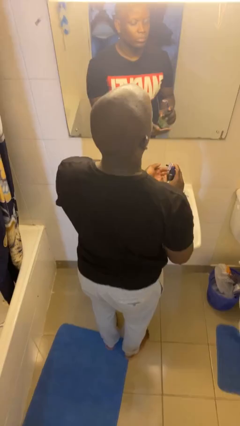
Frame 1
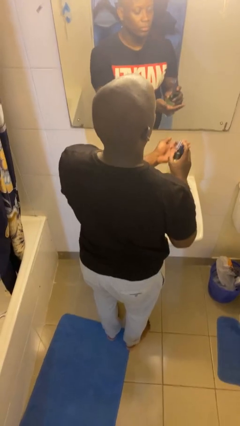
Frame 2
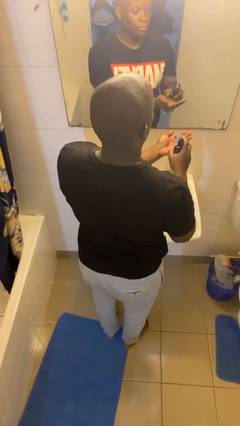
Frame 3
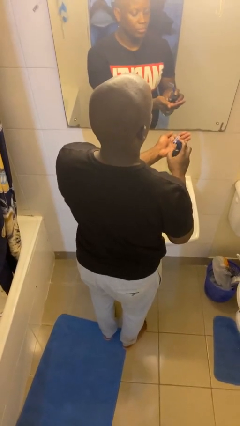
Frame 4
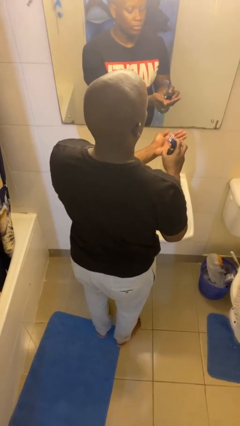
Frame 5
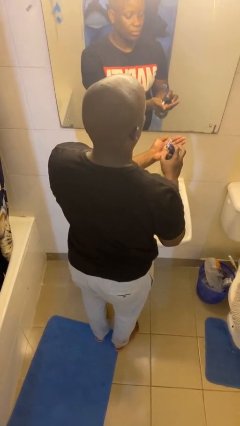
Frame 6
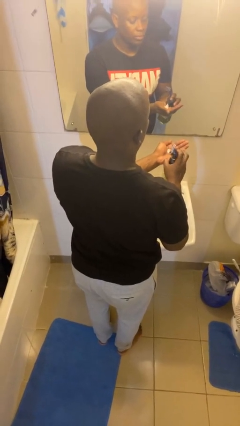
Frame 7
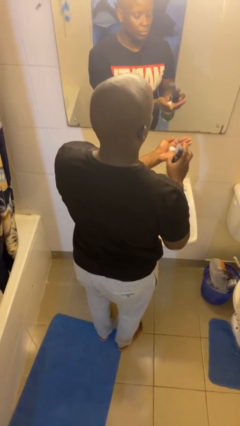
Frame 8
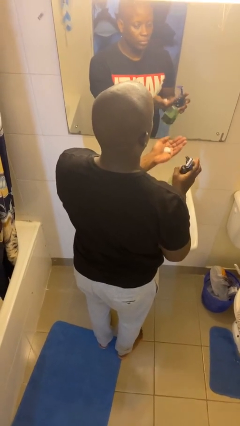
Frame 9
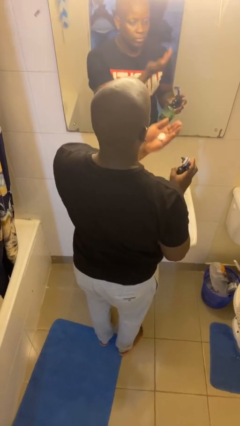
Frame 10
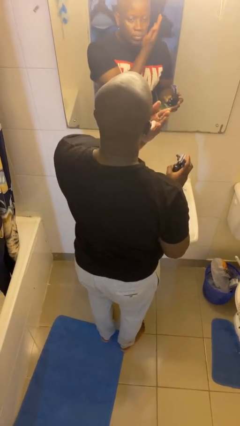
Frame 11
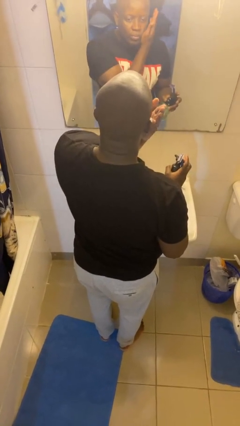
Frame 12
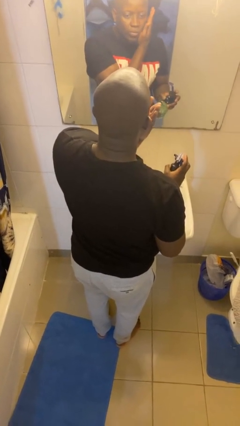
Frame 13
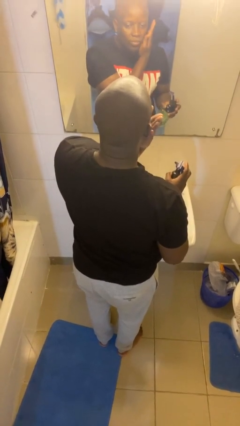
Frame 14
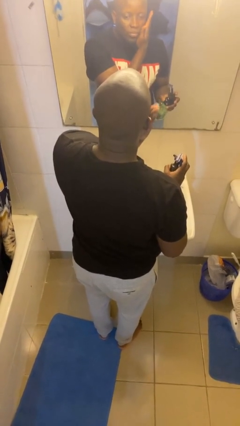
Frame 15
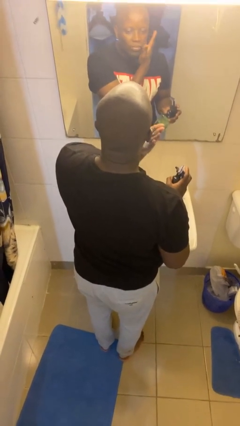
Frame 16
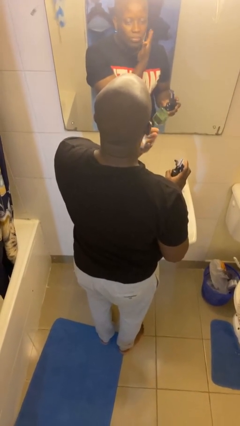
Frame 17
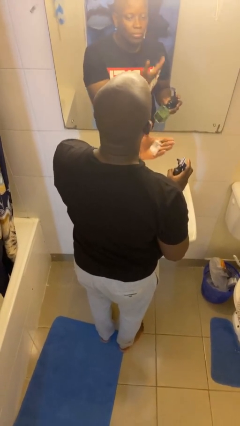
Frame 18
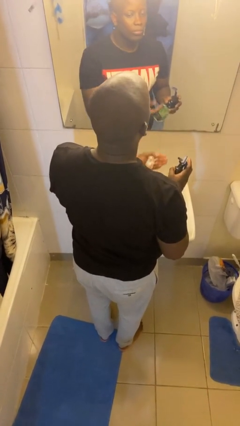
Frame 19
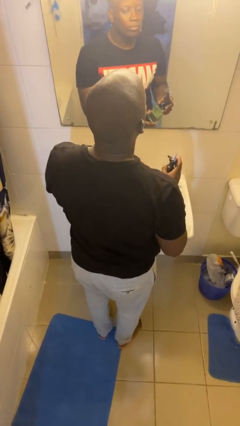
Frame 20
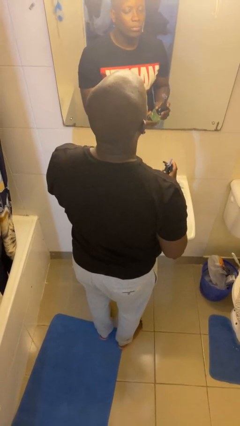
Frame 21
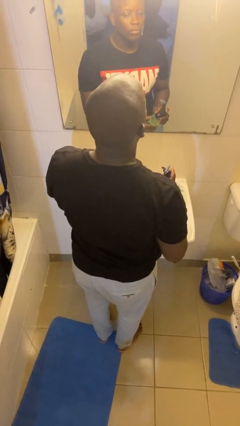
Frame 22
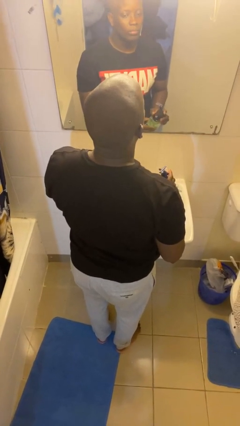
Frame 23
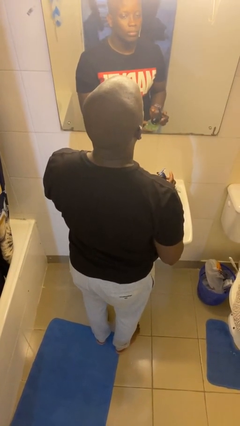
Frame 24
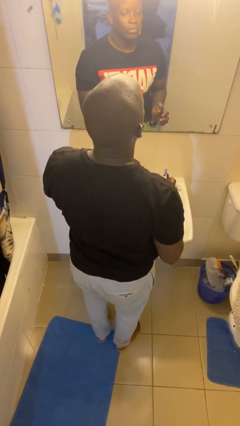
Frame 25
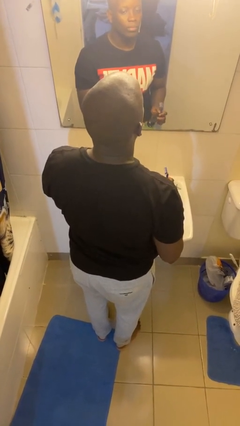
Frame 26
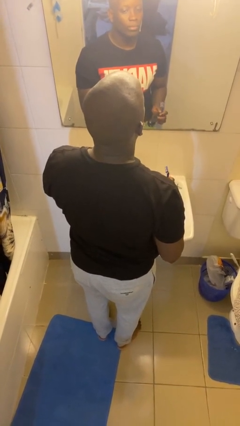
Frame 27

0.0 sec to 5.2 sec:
person applies shaving cream

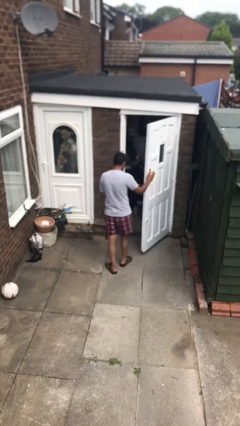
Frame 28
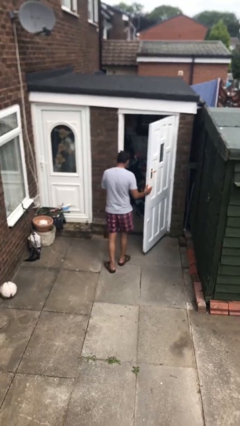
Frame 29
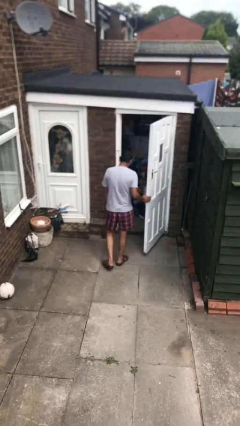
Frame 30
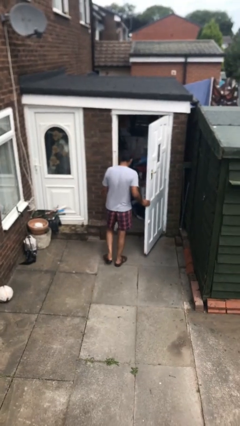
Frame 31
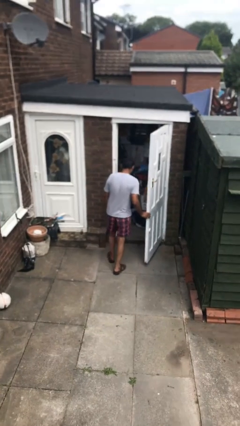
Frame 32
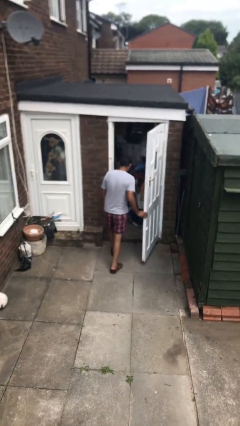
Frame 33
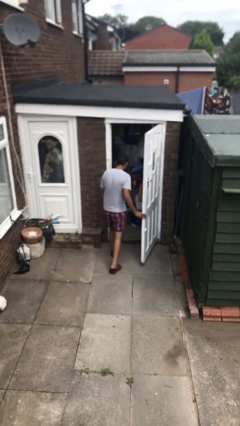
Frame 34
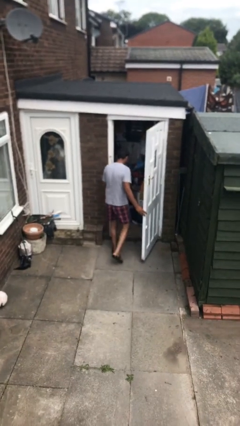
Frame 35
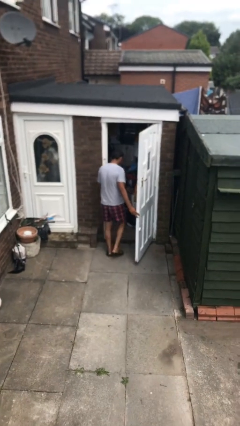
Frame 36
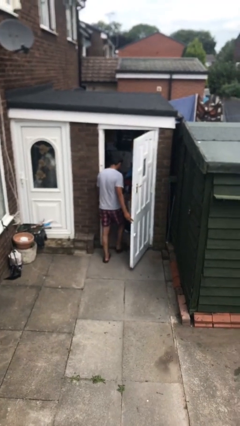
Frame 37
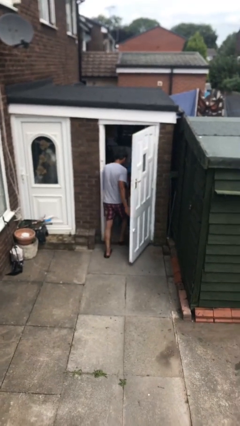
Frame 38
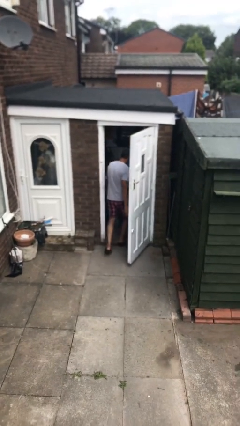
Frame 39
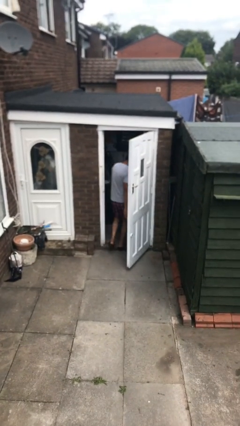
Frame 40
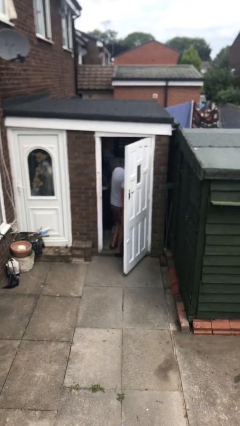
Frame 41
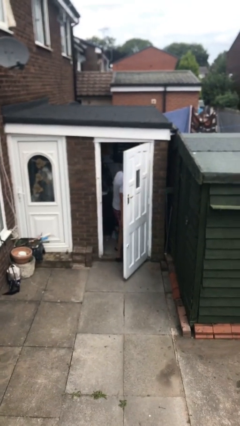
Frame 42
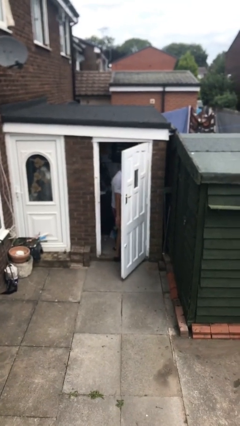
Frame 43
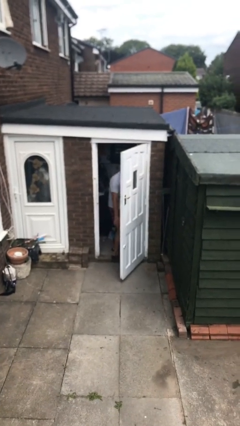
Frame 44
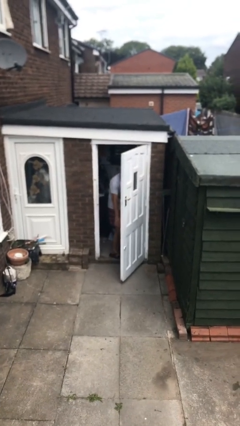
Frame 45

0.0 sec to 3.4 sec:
person exits scene through structure

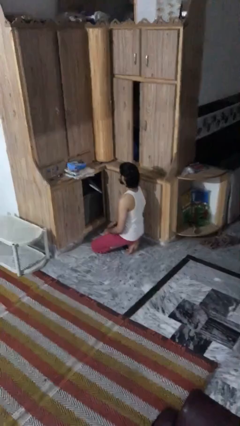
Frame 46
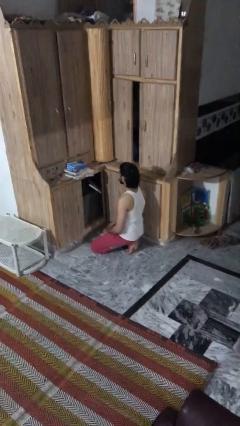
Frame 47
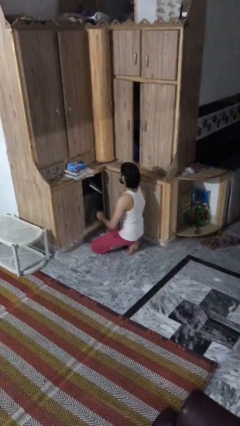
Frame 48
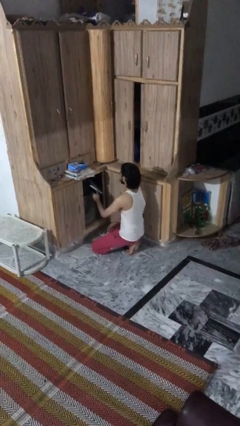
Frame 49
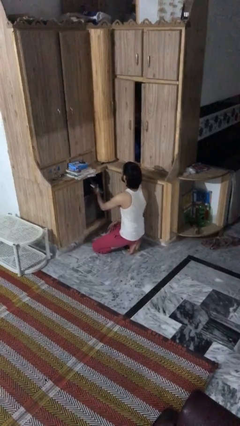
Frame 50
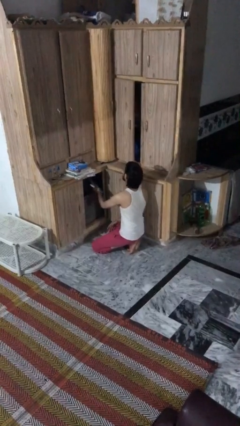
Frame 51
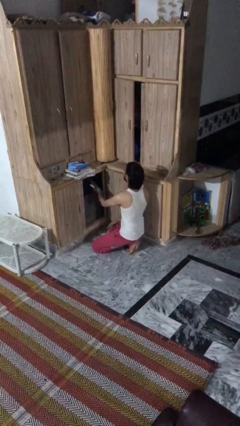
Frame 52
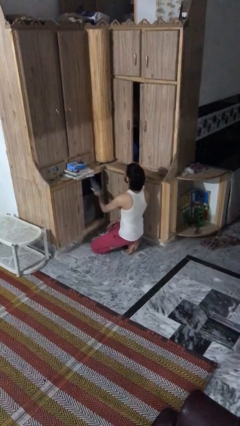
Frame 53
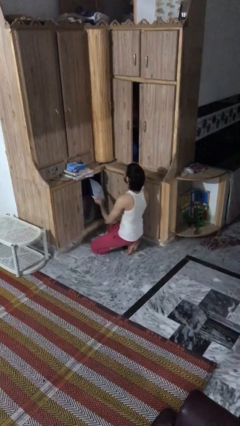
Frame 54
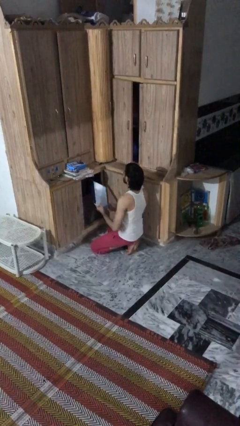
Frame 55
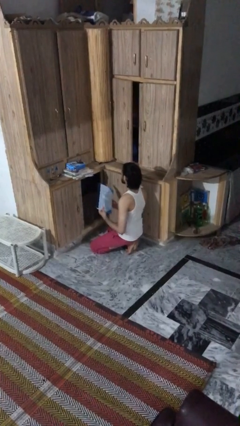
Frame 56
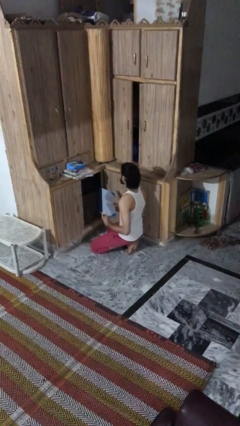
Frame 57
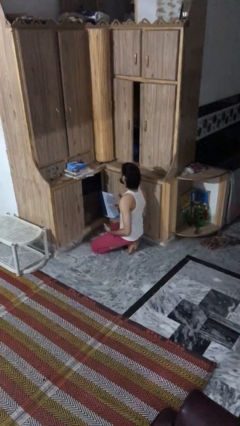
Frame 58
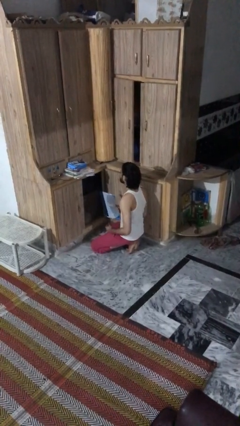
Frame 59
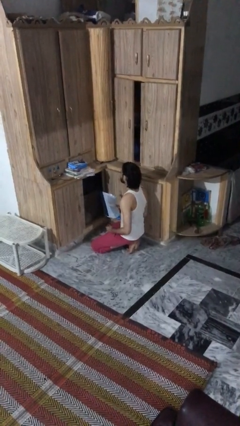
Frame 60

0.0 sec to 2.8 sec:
person picks up object from cabinet

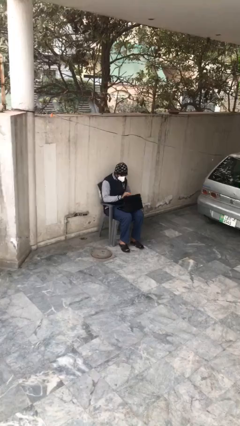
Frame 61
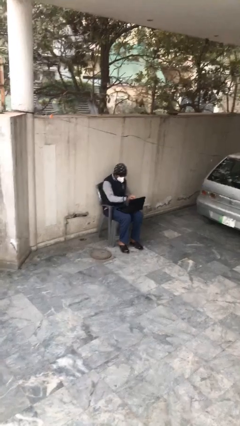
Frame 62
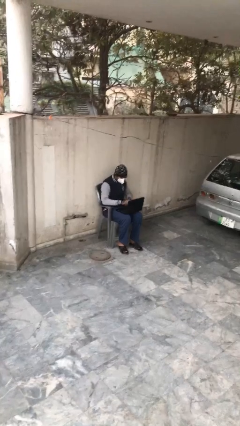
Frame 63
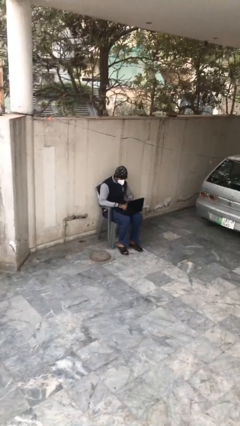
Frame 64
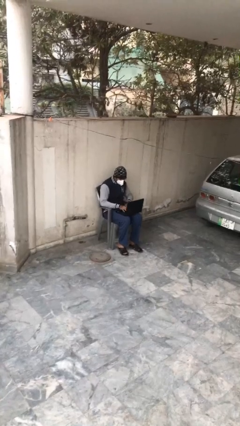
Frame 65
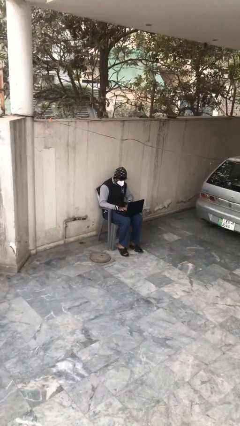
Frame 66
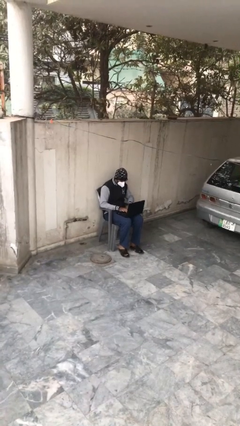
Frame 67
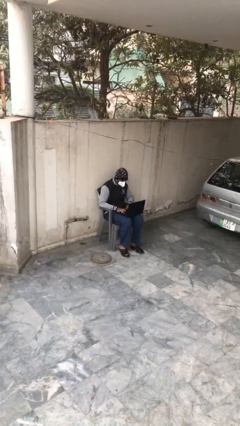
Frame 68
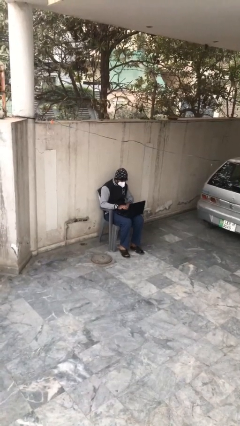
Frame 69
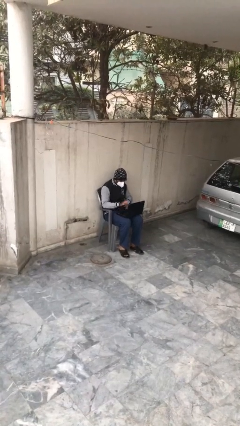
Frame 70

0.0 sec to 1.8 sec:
person interacts with laptop

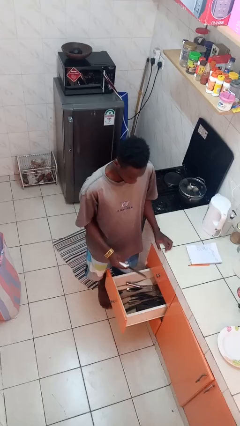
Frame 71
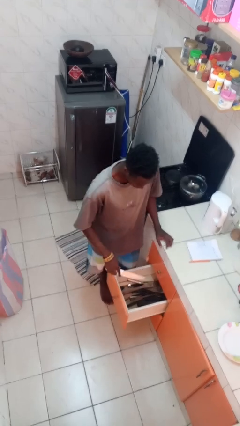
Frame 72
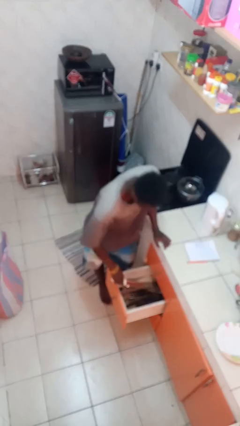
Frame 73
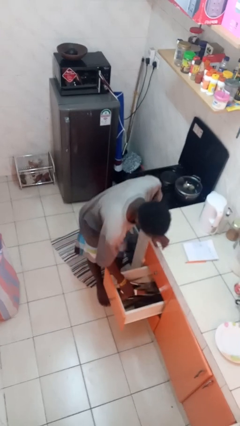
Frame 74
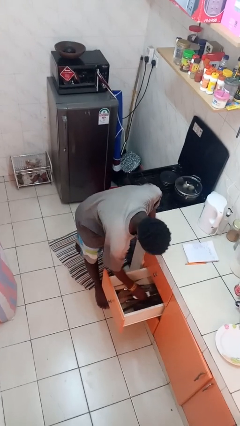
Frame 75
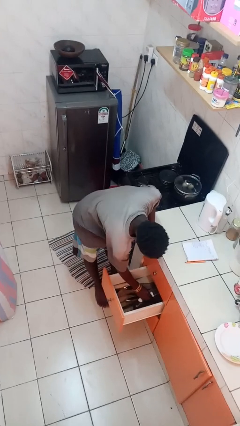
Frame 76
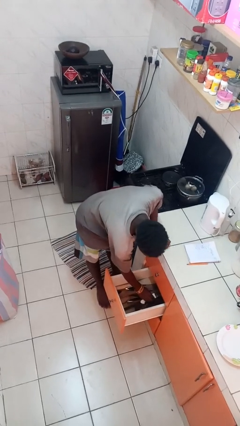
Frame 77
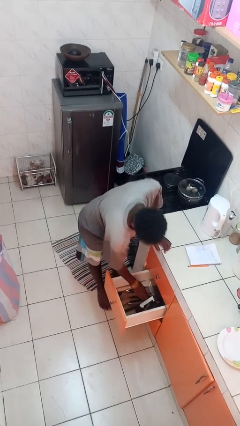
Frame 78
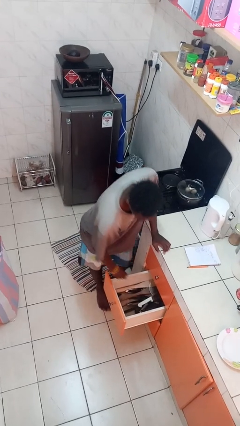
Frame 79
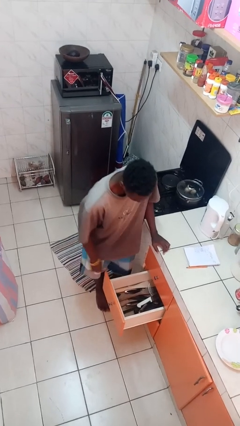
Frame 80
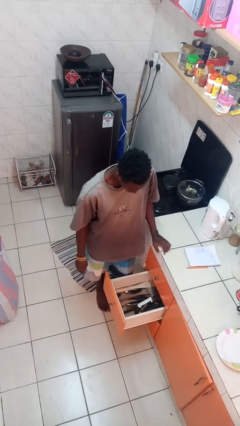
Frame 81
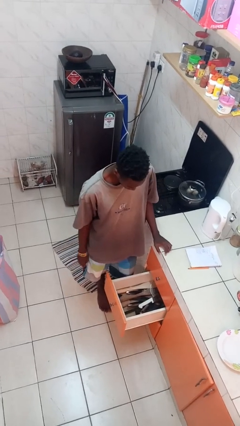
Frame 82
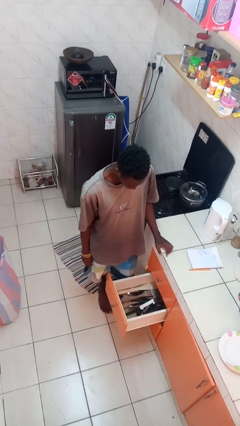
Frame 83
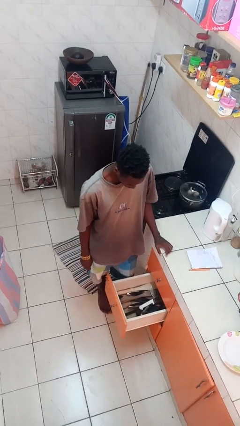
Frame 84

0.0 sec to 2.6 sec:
person puts object into kitchen drawer

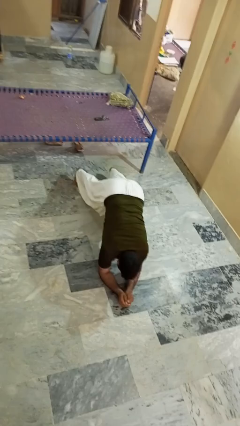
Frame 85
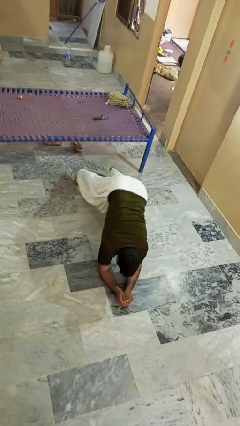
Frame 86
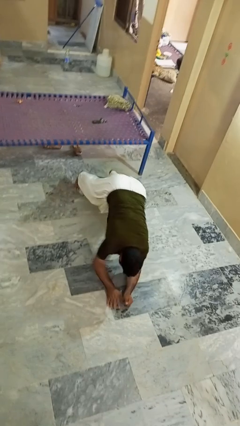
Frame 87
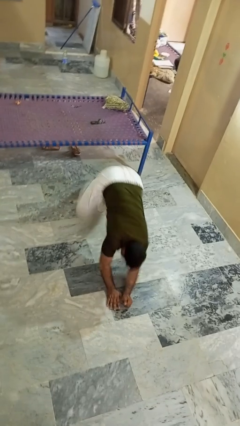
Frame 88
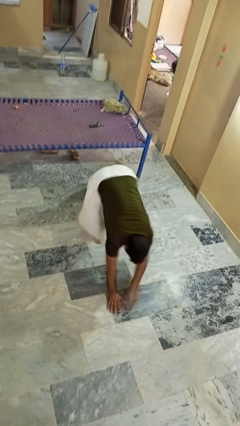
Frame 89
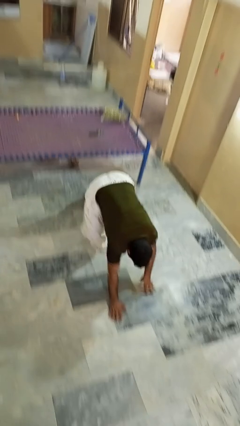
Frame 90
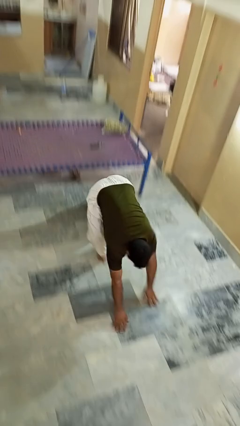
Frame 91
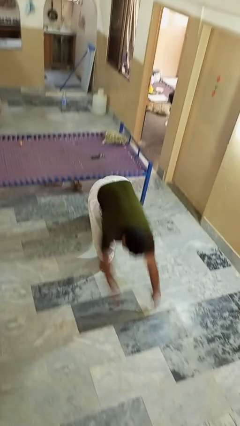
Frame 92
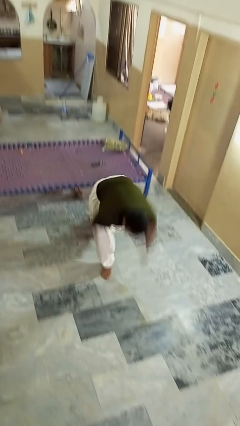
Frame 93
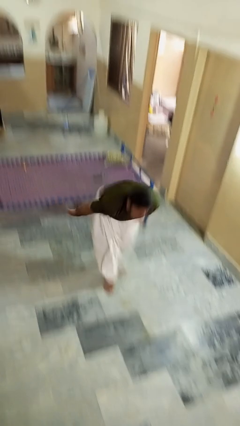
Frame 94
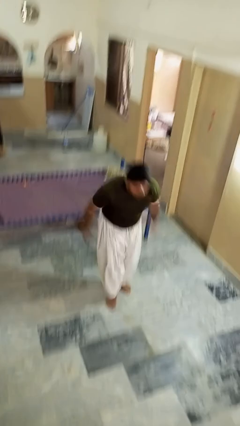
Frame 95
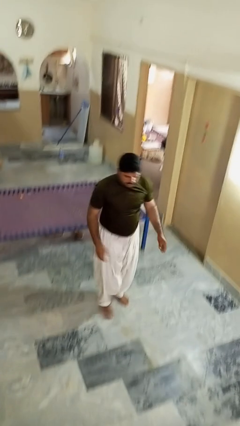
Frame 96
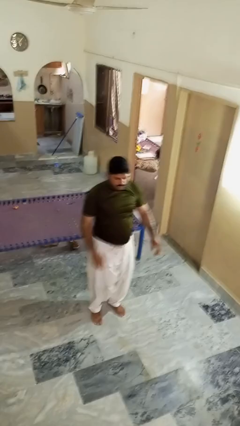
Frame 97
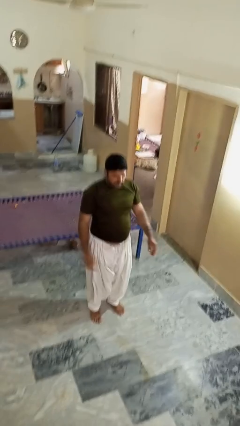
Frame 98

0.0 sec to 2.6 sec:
person stands up from floor
